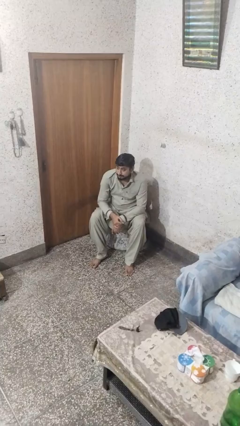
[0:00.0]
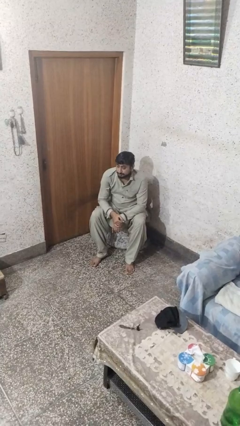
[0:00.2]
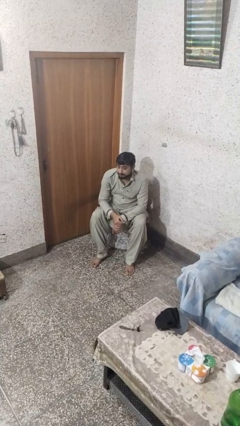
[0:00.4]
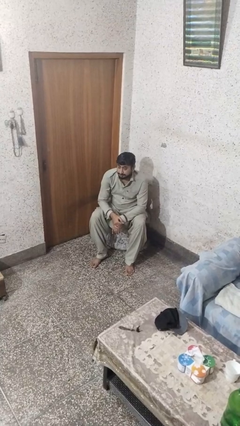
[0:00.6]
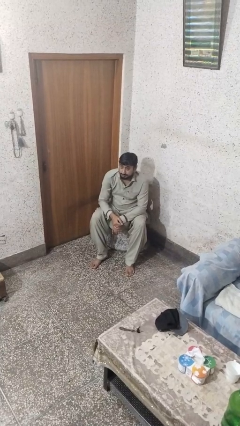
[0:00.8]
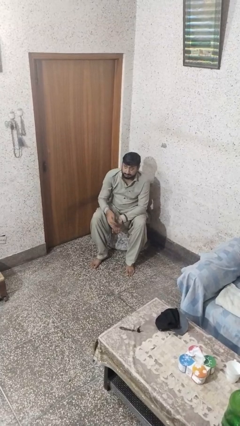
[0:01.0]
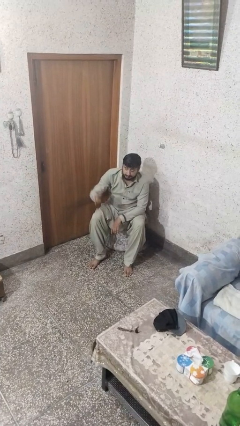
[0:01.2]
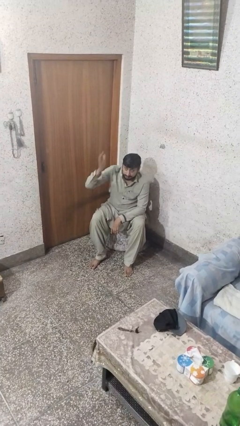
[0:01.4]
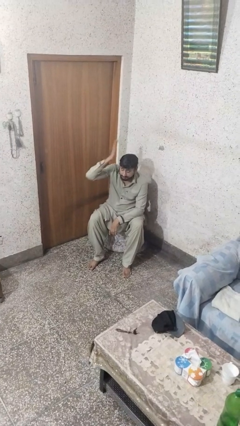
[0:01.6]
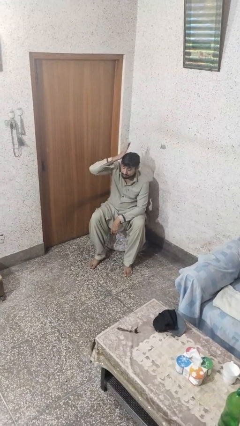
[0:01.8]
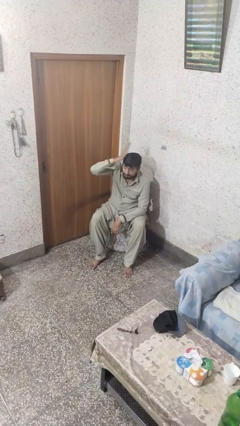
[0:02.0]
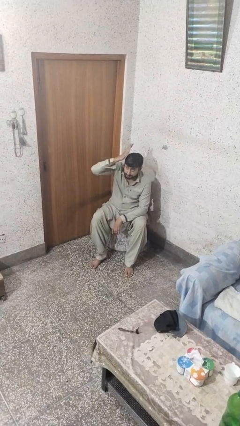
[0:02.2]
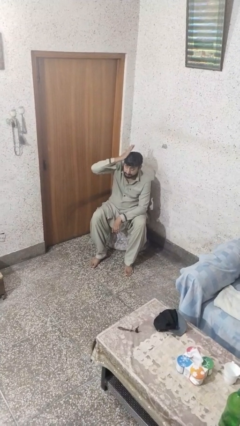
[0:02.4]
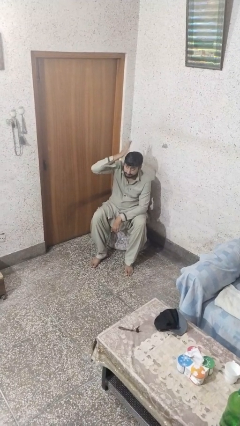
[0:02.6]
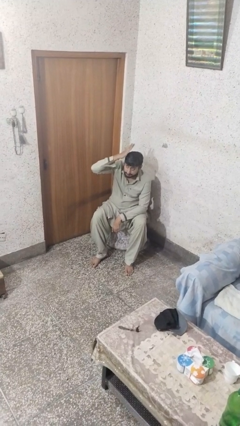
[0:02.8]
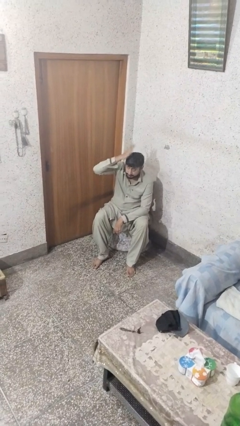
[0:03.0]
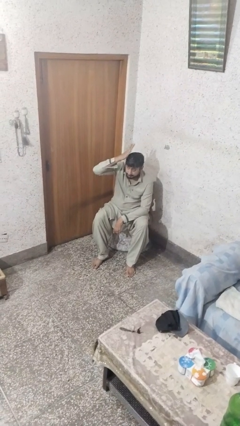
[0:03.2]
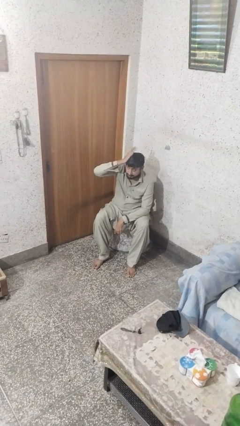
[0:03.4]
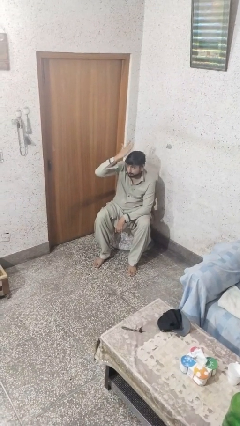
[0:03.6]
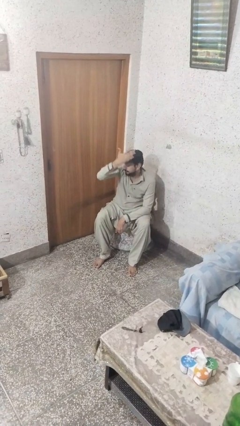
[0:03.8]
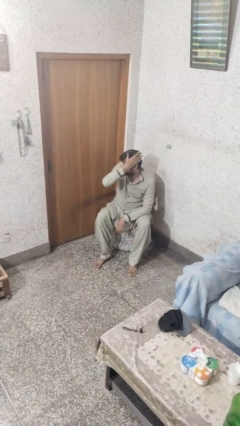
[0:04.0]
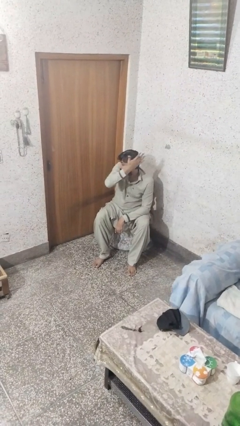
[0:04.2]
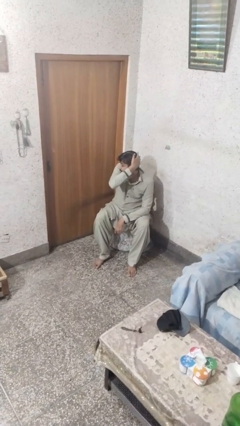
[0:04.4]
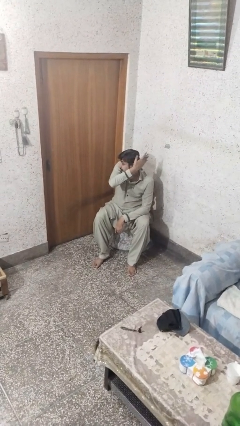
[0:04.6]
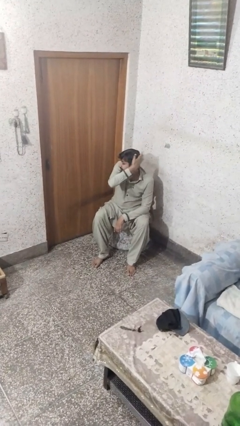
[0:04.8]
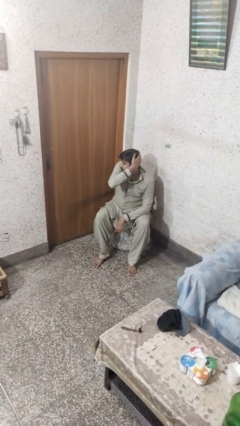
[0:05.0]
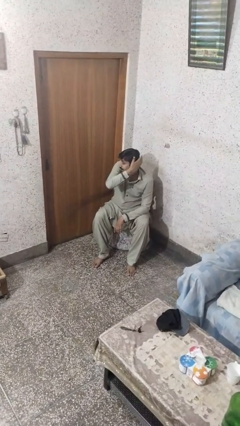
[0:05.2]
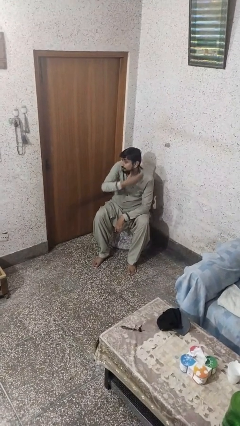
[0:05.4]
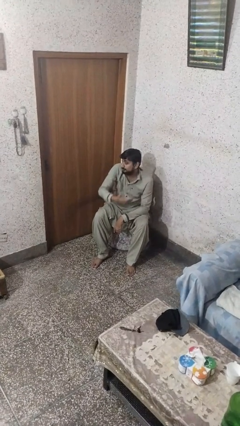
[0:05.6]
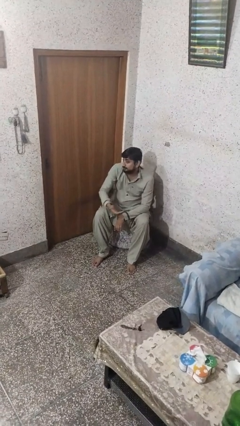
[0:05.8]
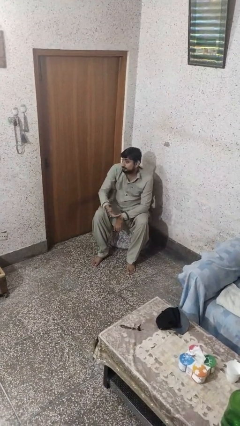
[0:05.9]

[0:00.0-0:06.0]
person pats head

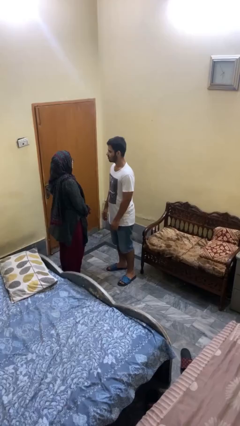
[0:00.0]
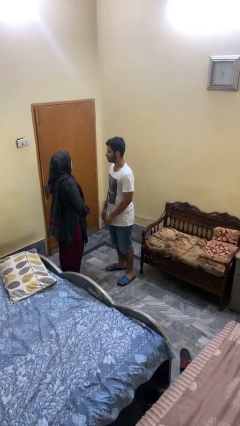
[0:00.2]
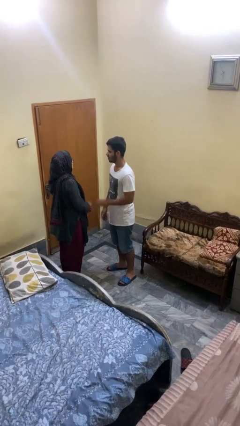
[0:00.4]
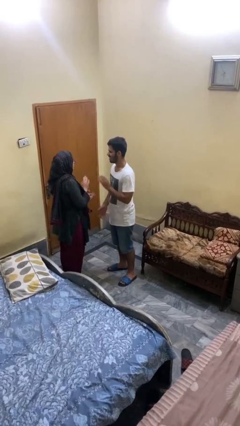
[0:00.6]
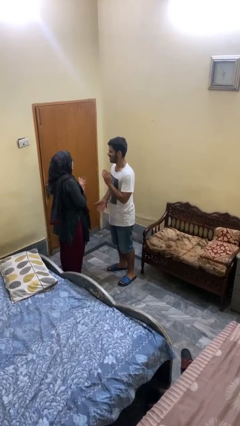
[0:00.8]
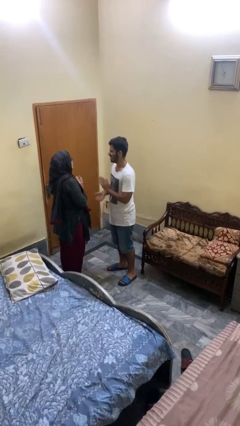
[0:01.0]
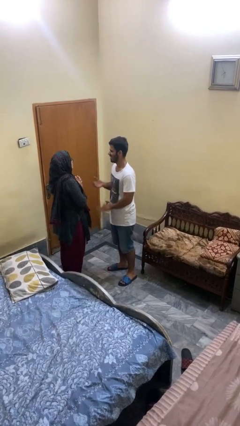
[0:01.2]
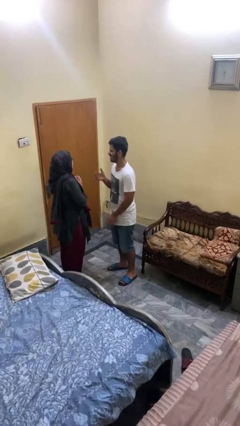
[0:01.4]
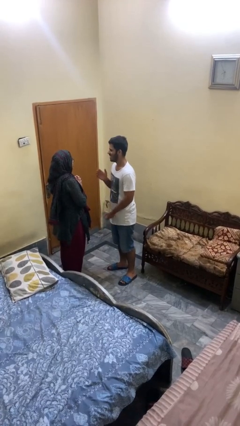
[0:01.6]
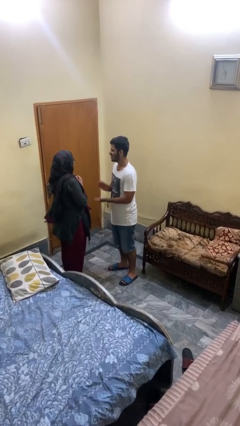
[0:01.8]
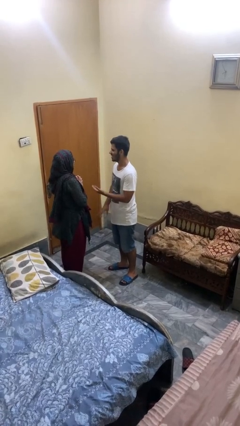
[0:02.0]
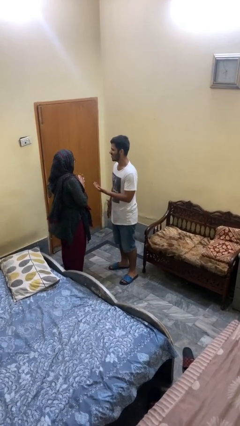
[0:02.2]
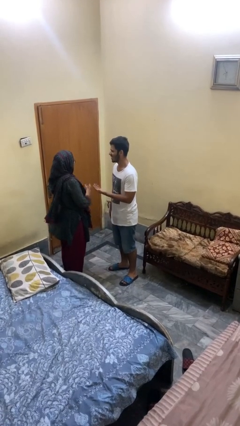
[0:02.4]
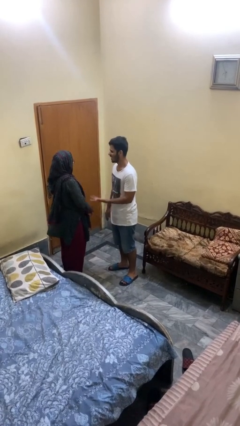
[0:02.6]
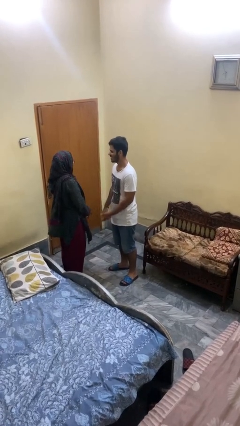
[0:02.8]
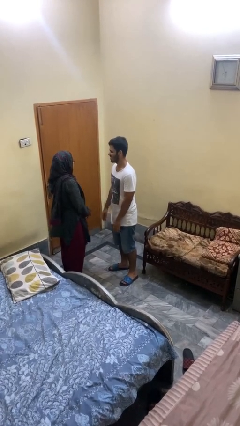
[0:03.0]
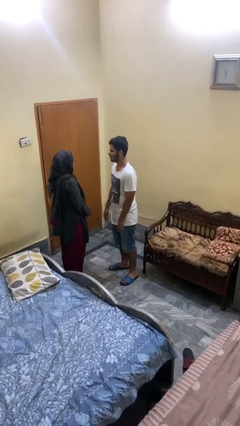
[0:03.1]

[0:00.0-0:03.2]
person laughs with person

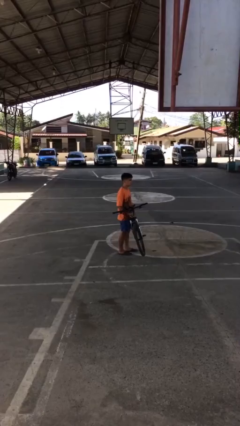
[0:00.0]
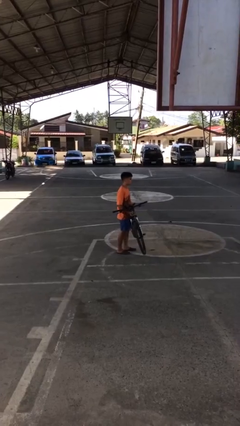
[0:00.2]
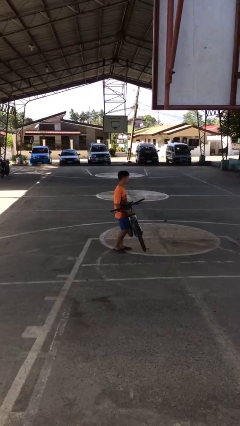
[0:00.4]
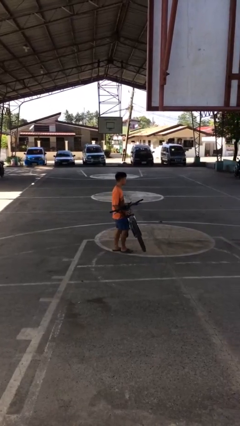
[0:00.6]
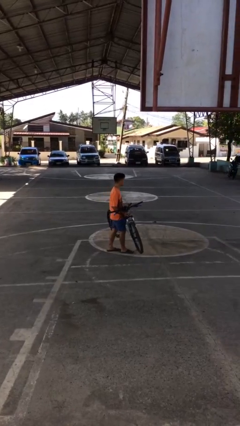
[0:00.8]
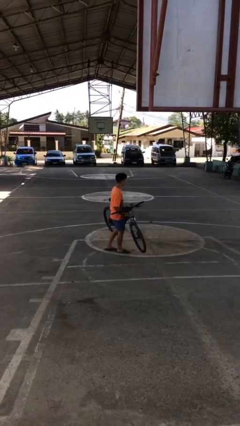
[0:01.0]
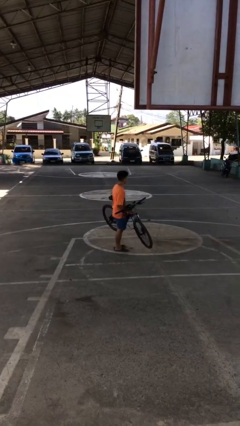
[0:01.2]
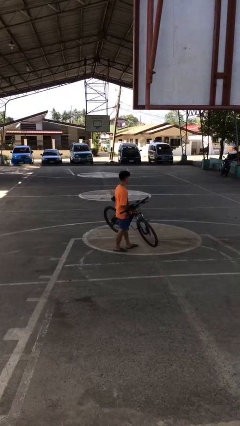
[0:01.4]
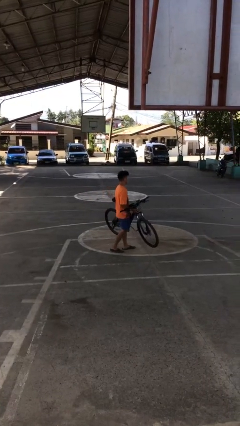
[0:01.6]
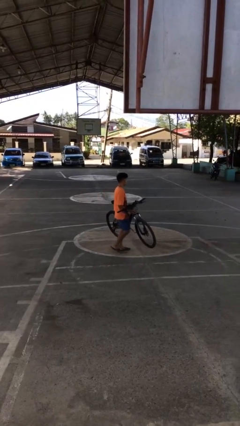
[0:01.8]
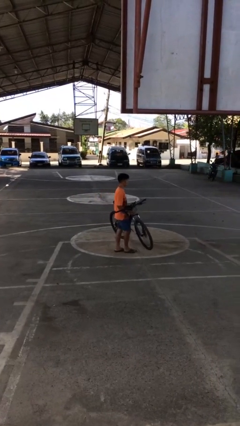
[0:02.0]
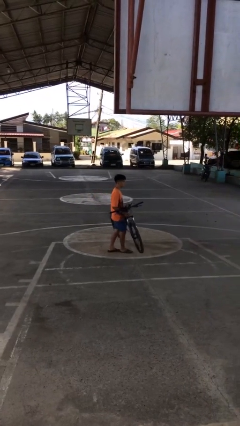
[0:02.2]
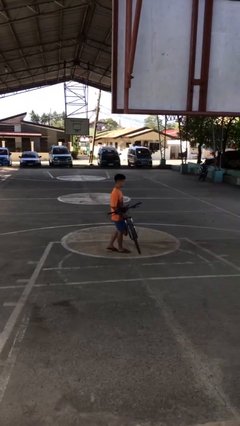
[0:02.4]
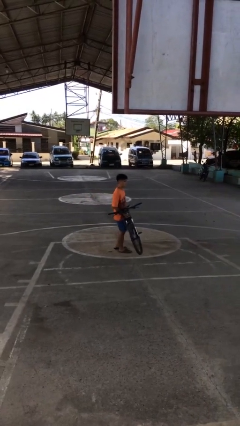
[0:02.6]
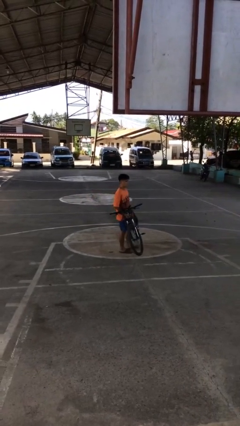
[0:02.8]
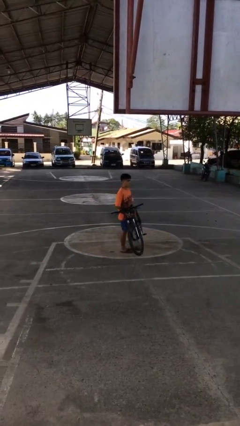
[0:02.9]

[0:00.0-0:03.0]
person carries bicycle

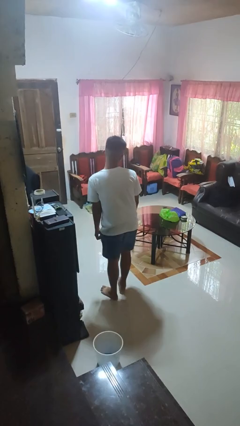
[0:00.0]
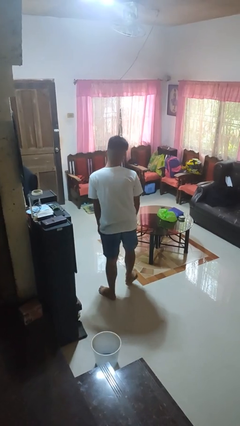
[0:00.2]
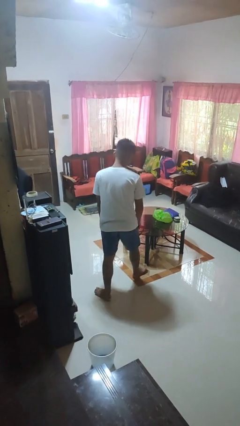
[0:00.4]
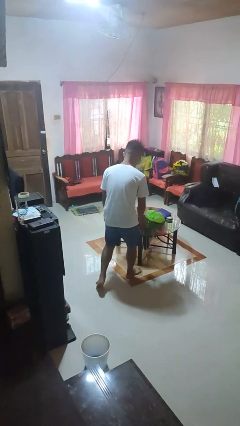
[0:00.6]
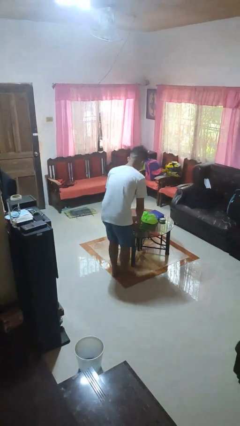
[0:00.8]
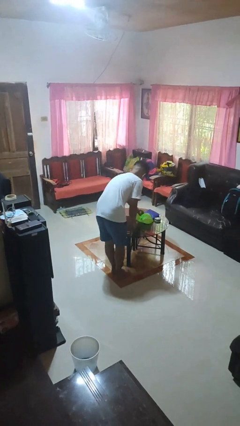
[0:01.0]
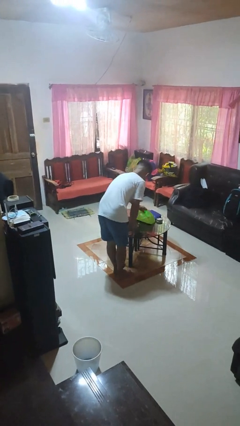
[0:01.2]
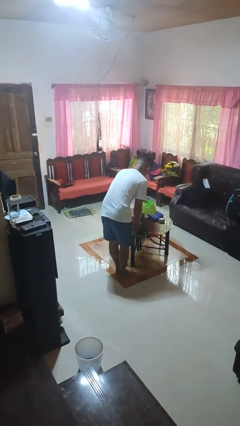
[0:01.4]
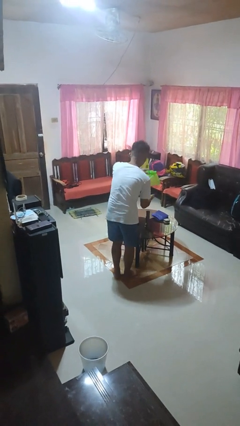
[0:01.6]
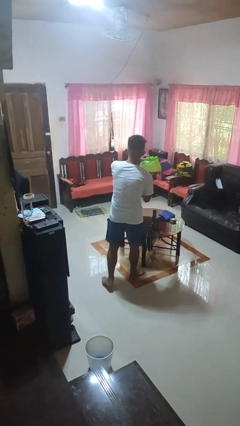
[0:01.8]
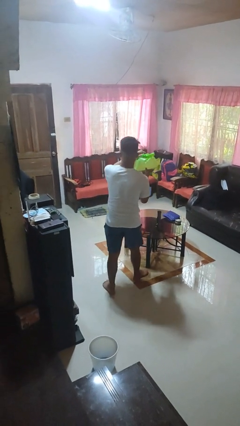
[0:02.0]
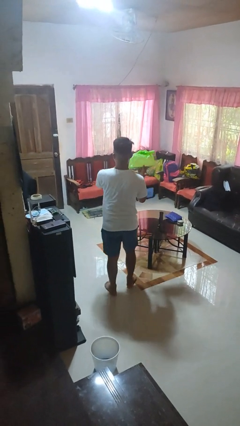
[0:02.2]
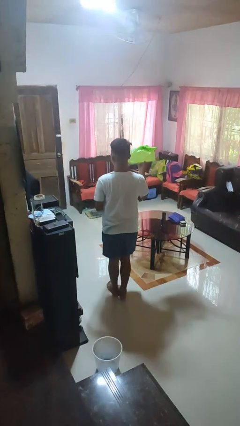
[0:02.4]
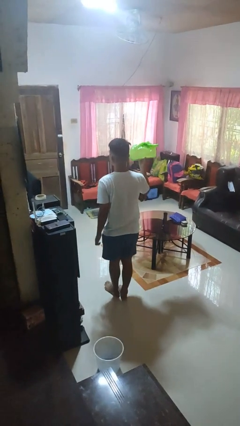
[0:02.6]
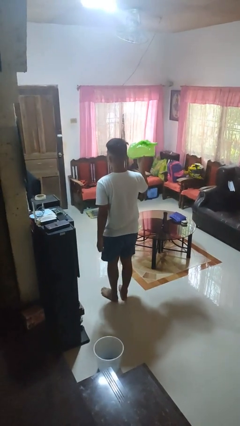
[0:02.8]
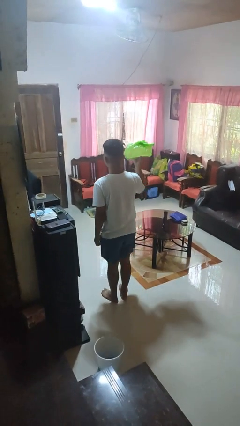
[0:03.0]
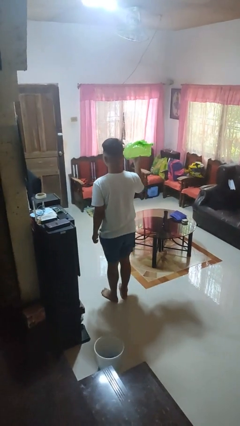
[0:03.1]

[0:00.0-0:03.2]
person picks up object from table

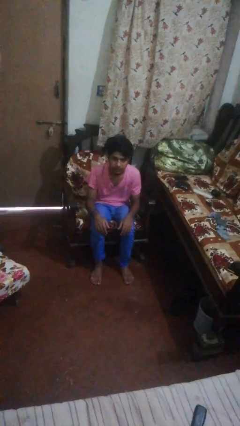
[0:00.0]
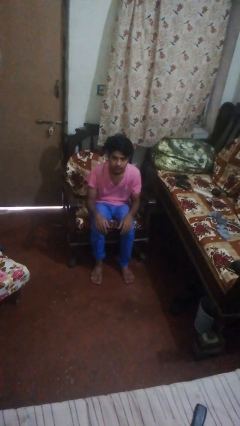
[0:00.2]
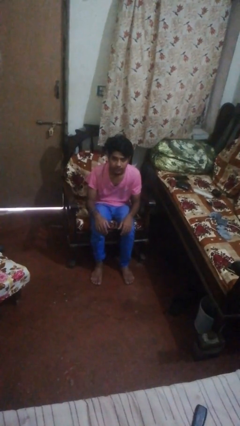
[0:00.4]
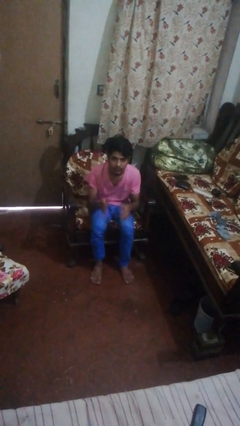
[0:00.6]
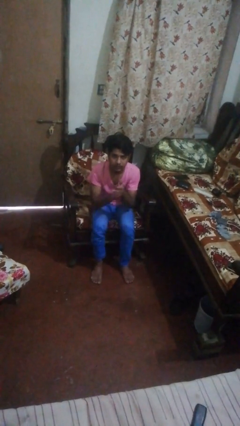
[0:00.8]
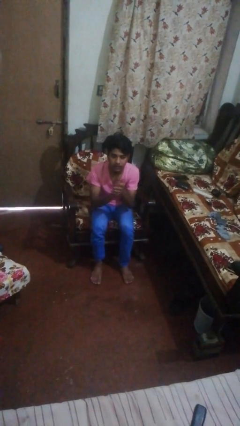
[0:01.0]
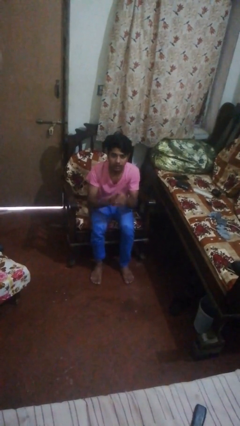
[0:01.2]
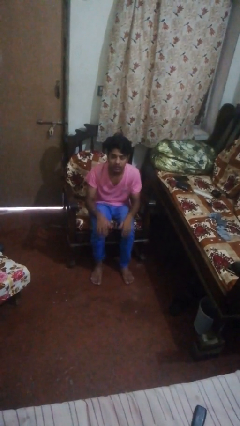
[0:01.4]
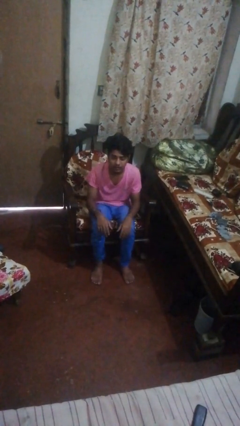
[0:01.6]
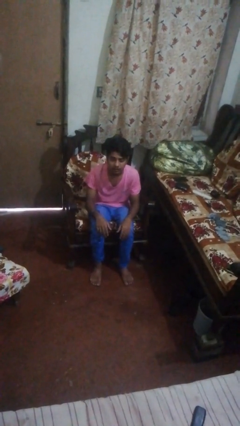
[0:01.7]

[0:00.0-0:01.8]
person claps hands
